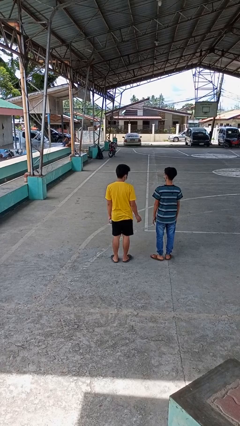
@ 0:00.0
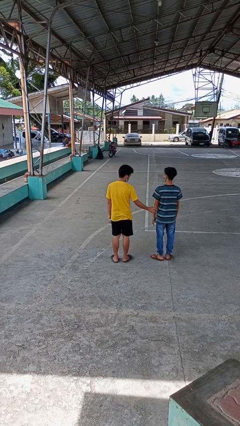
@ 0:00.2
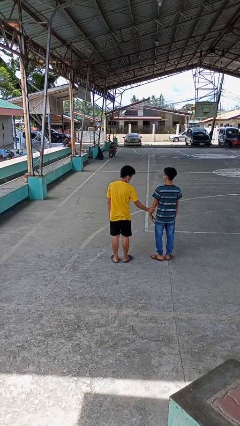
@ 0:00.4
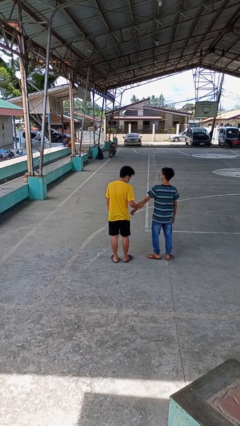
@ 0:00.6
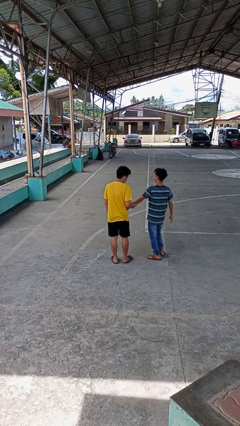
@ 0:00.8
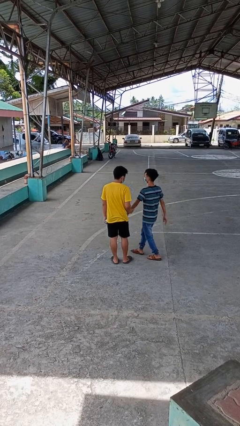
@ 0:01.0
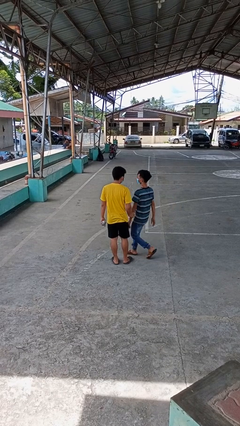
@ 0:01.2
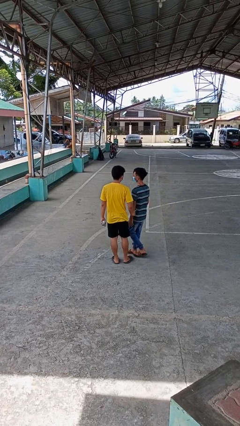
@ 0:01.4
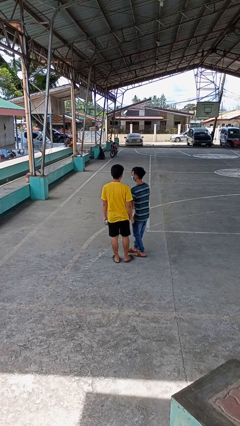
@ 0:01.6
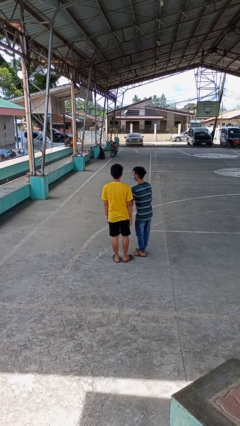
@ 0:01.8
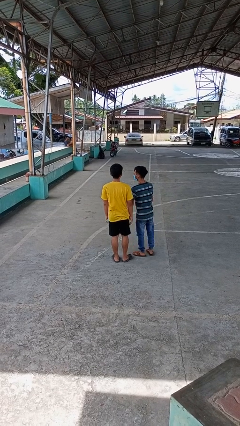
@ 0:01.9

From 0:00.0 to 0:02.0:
person grabs person by forearm

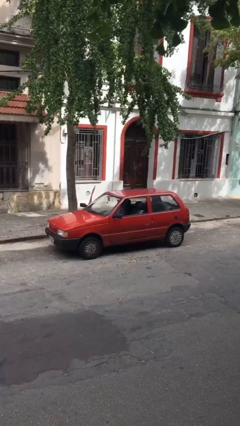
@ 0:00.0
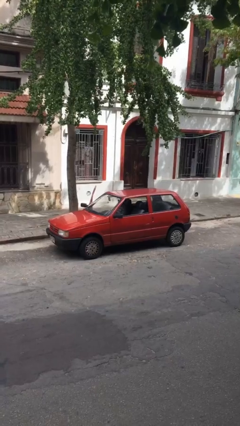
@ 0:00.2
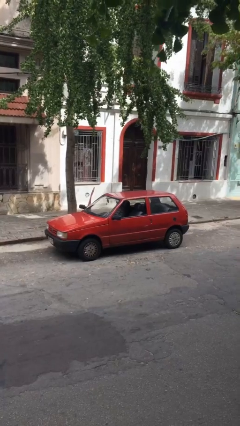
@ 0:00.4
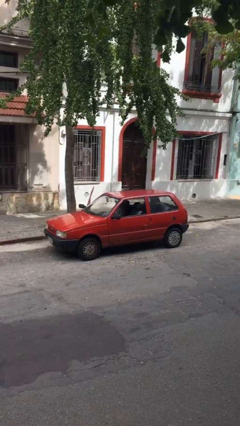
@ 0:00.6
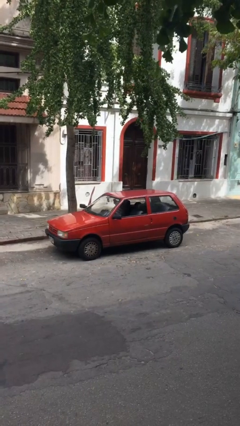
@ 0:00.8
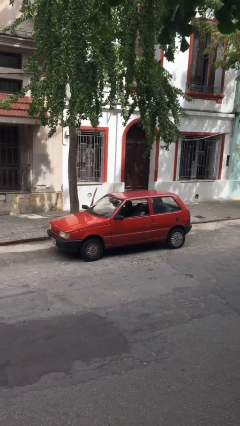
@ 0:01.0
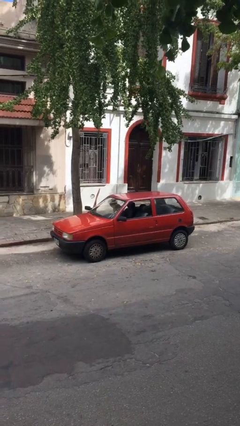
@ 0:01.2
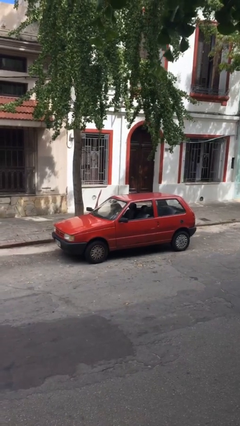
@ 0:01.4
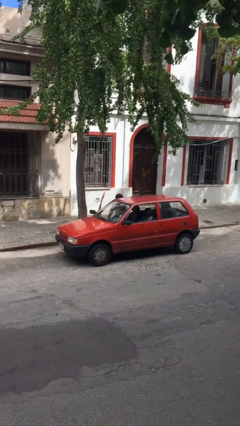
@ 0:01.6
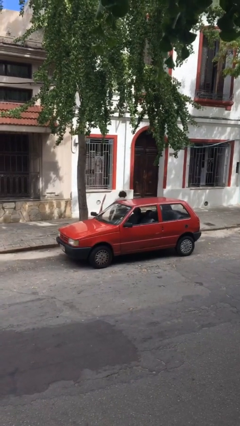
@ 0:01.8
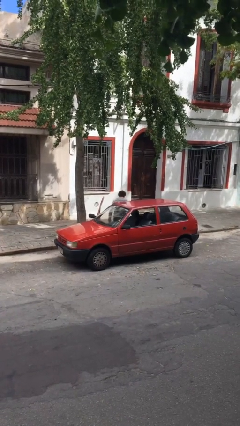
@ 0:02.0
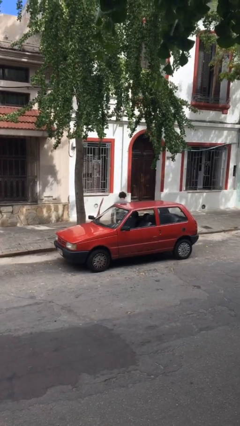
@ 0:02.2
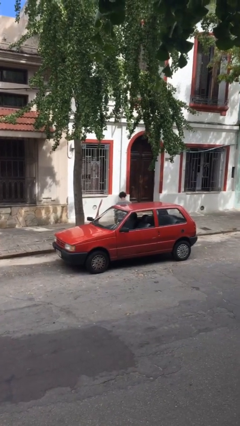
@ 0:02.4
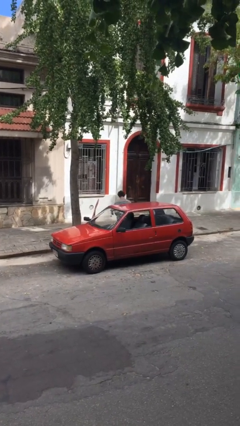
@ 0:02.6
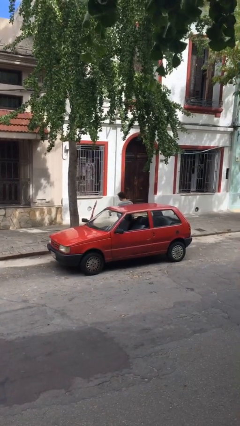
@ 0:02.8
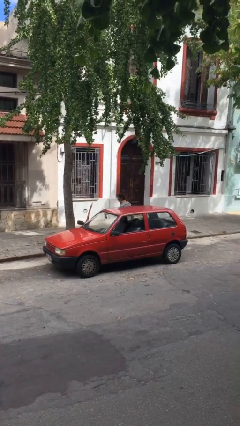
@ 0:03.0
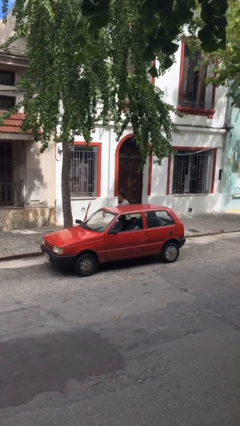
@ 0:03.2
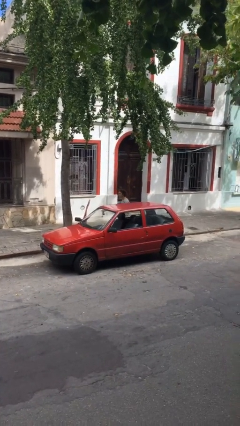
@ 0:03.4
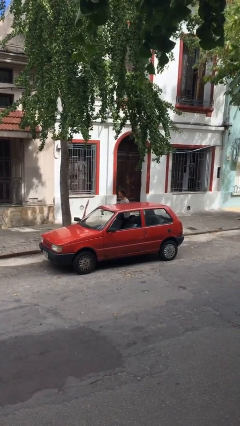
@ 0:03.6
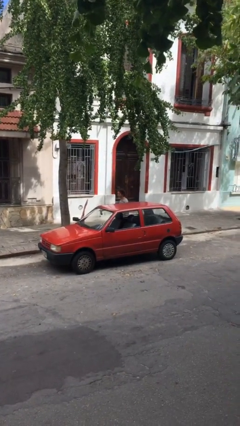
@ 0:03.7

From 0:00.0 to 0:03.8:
person exits car

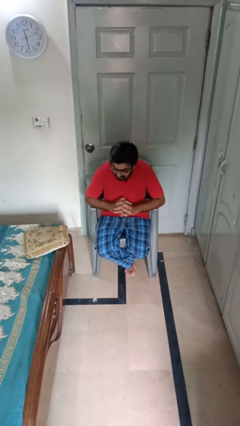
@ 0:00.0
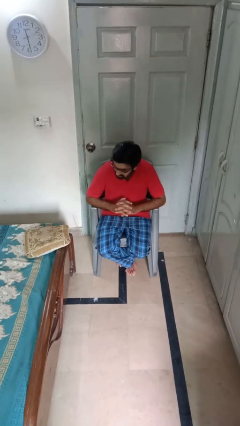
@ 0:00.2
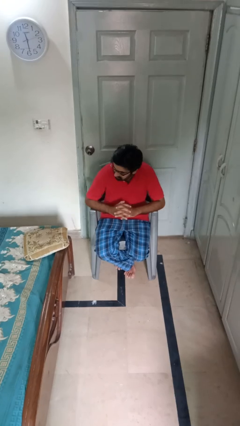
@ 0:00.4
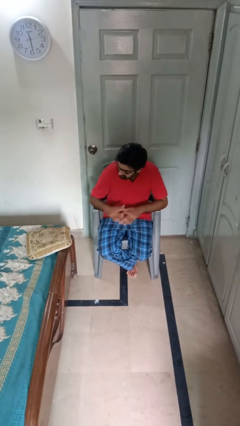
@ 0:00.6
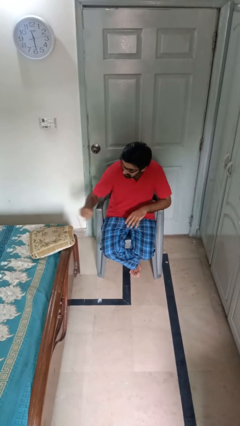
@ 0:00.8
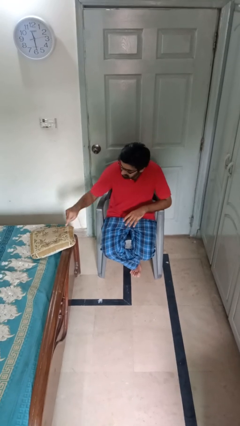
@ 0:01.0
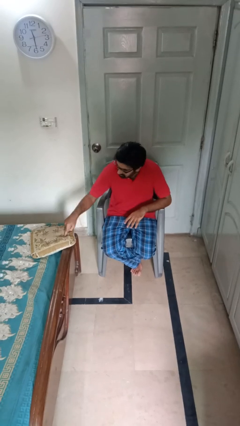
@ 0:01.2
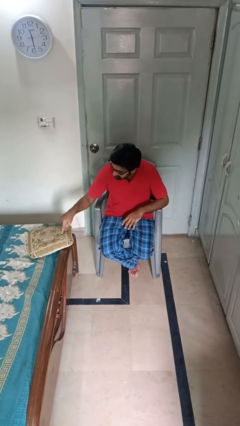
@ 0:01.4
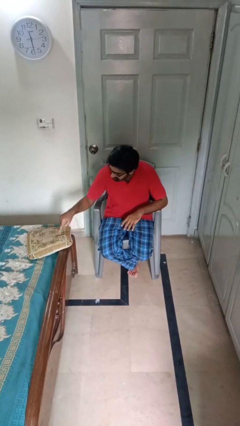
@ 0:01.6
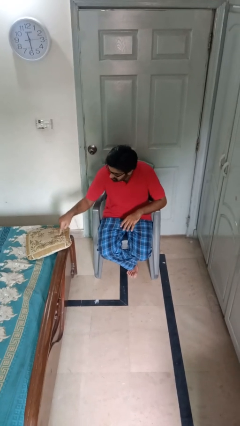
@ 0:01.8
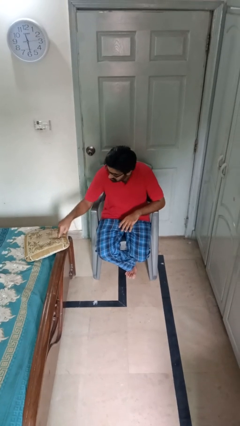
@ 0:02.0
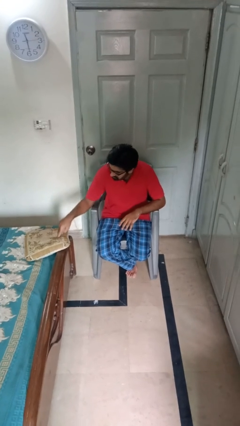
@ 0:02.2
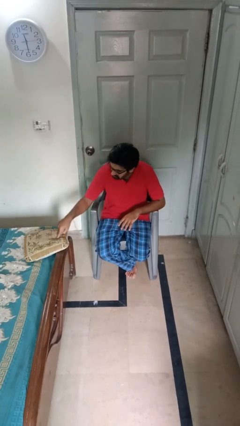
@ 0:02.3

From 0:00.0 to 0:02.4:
person taps object with finger

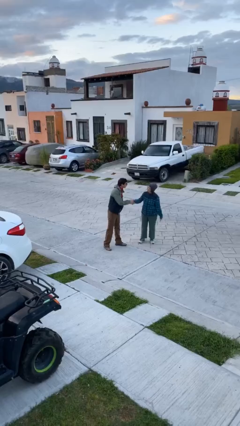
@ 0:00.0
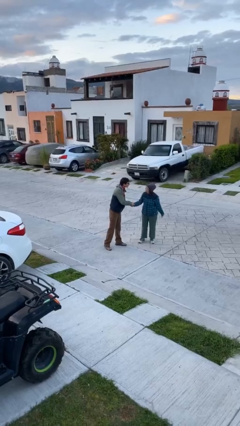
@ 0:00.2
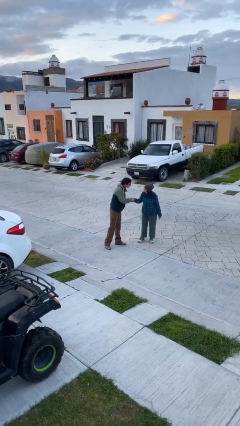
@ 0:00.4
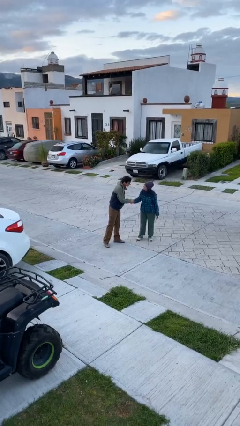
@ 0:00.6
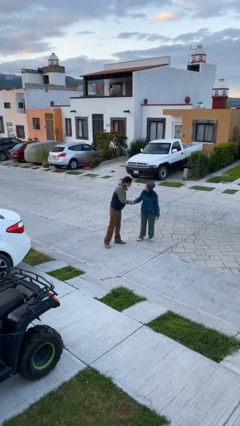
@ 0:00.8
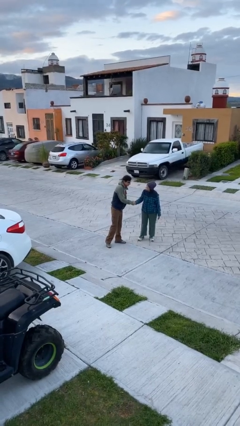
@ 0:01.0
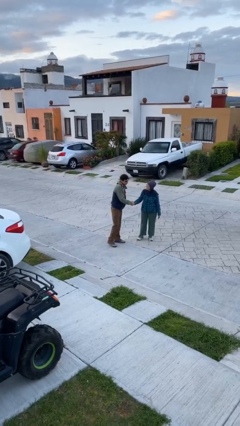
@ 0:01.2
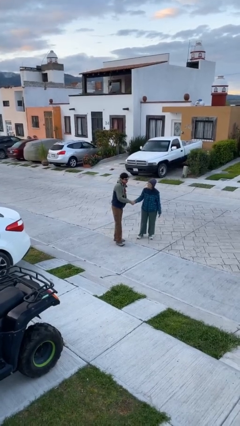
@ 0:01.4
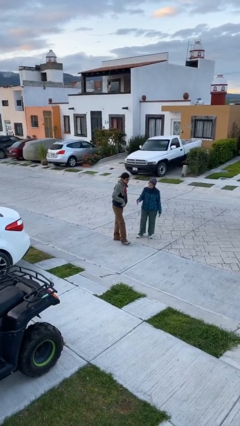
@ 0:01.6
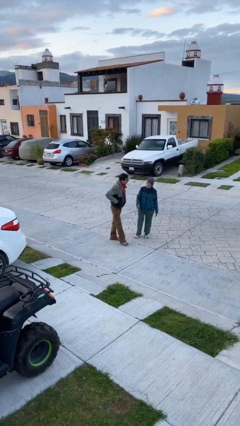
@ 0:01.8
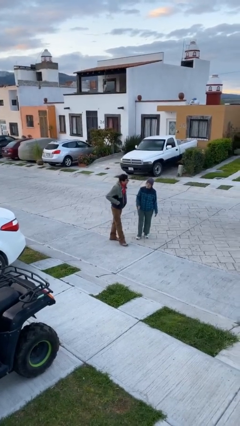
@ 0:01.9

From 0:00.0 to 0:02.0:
person shakes hand

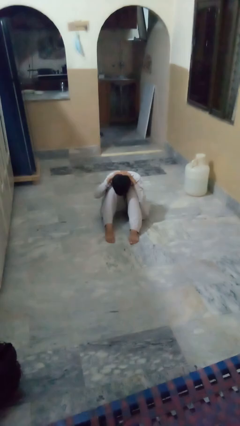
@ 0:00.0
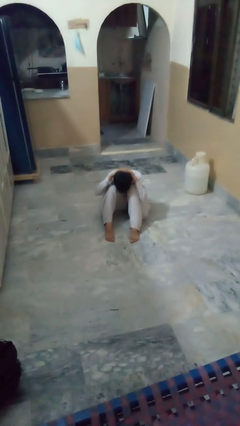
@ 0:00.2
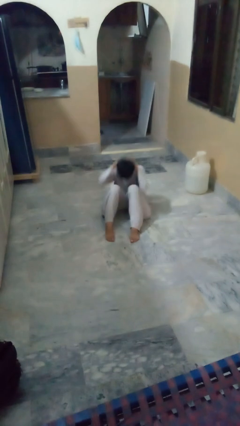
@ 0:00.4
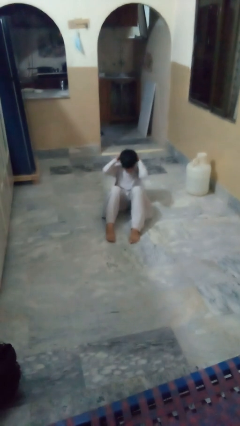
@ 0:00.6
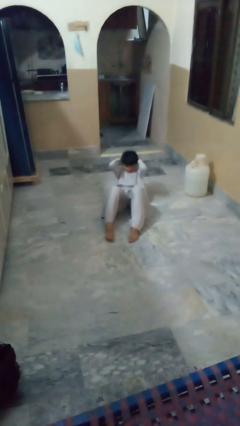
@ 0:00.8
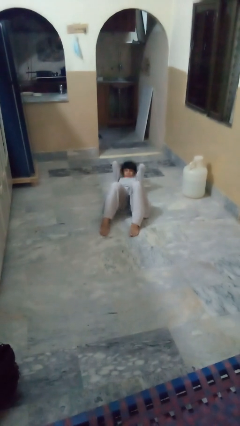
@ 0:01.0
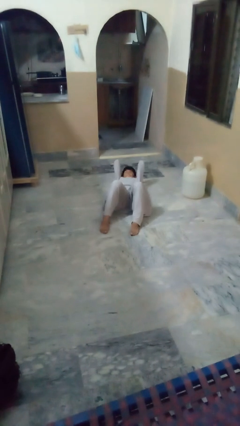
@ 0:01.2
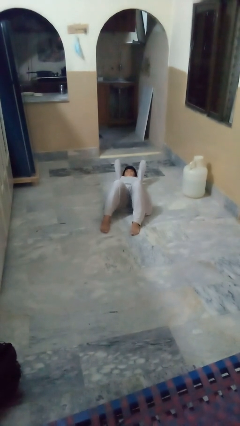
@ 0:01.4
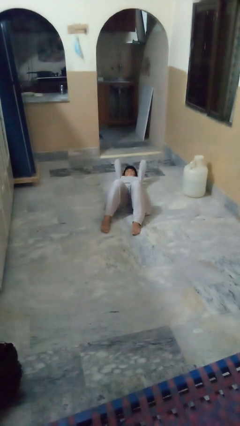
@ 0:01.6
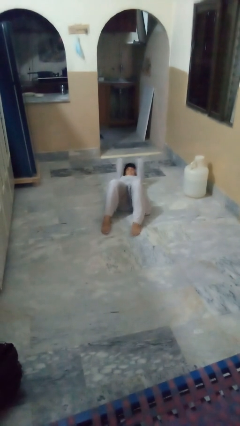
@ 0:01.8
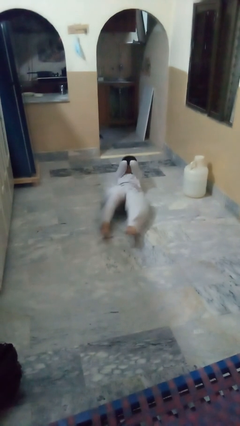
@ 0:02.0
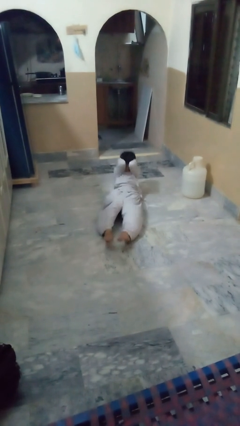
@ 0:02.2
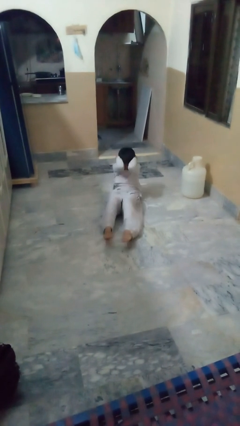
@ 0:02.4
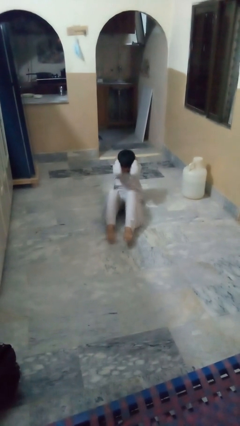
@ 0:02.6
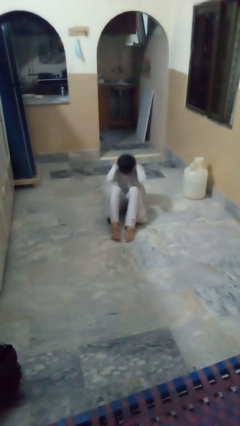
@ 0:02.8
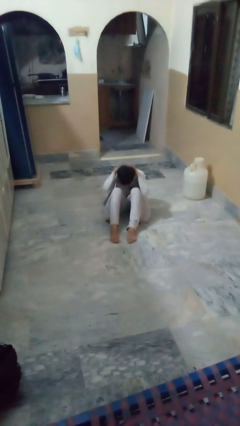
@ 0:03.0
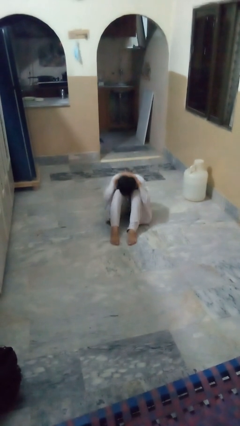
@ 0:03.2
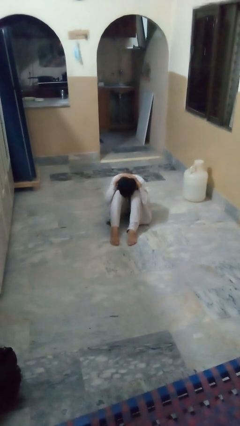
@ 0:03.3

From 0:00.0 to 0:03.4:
person exercises with situp

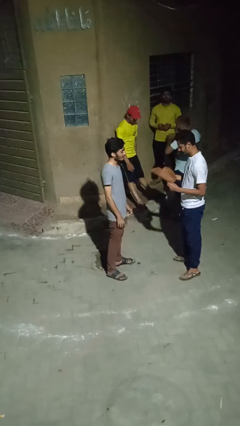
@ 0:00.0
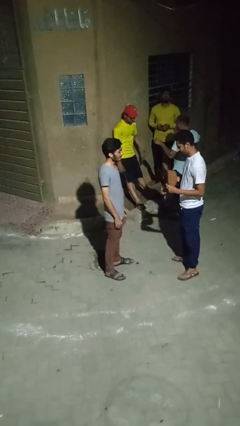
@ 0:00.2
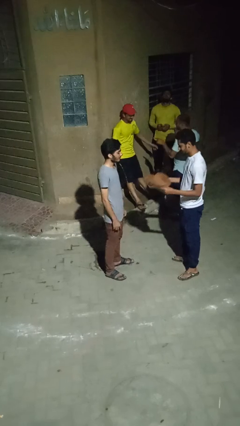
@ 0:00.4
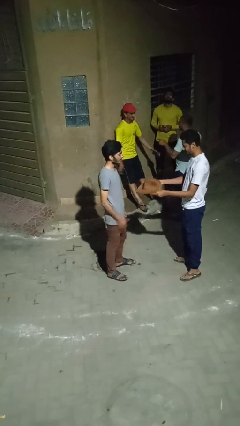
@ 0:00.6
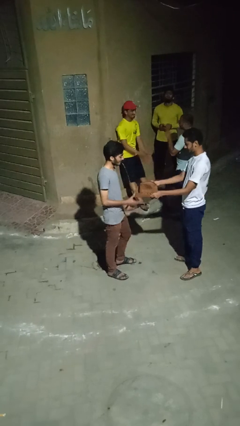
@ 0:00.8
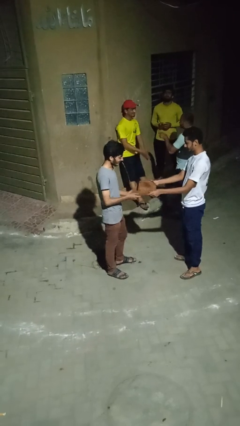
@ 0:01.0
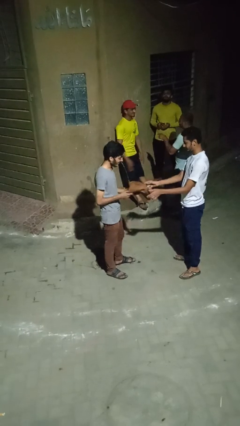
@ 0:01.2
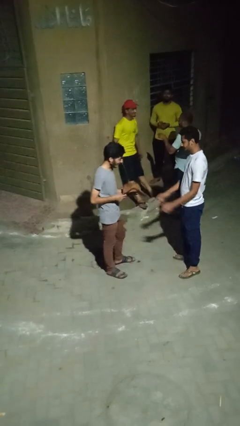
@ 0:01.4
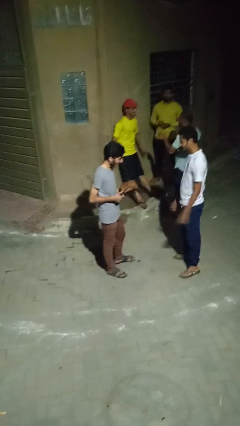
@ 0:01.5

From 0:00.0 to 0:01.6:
person transfers object to person

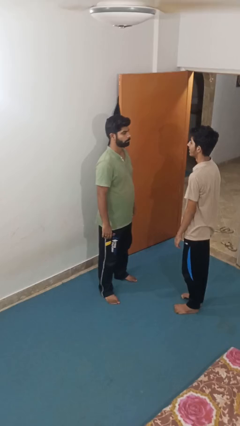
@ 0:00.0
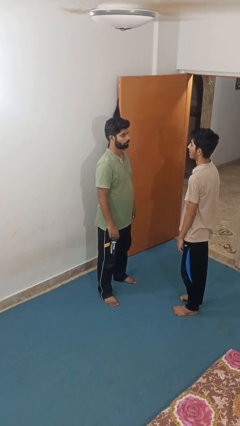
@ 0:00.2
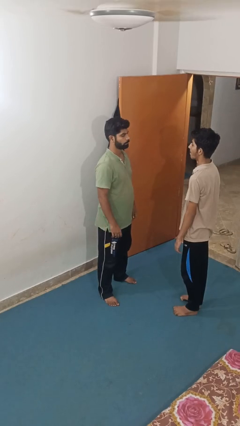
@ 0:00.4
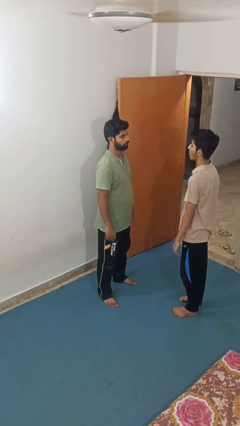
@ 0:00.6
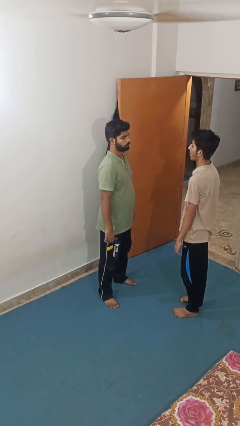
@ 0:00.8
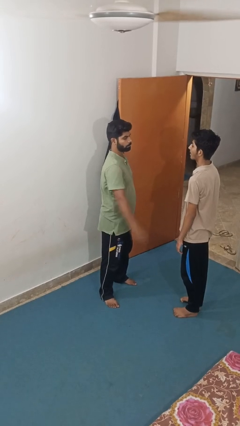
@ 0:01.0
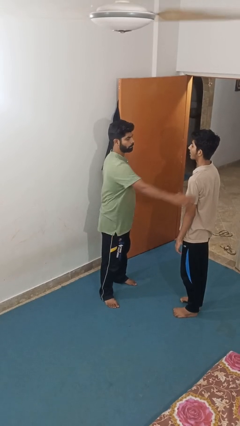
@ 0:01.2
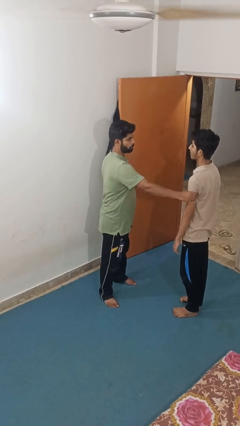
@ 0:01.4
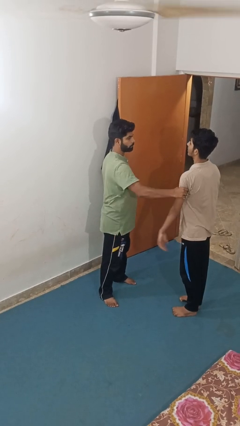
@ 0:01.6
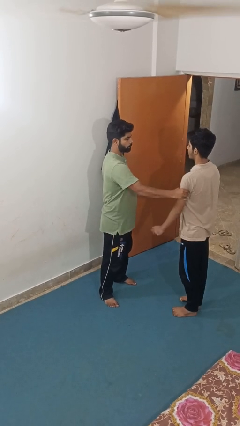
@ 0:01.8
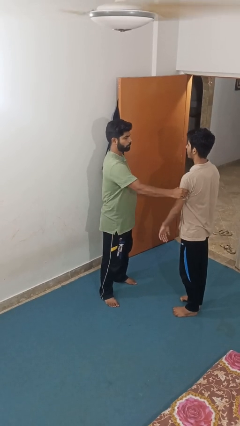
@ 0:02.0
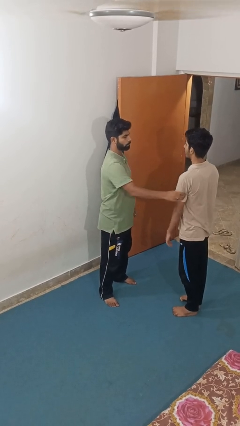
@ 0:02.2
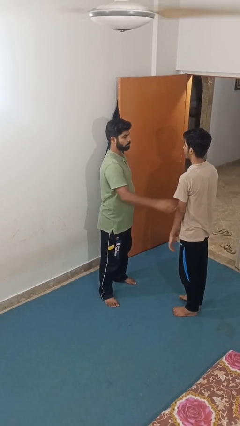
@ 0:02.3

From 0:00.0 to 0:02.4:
person grabs person by bicep
